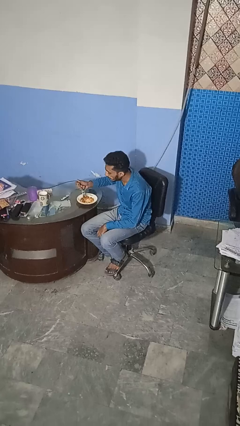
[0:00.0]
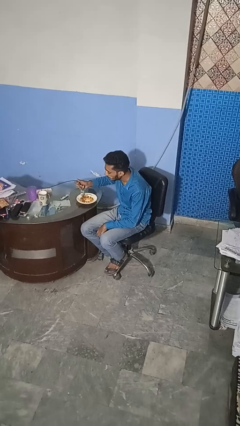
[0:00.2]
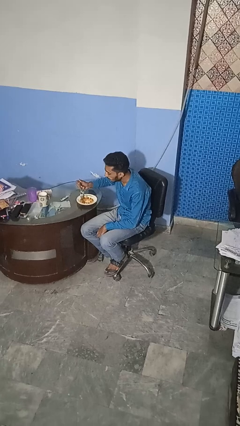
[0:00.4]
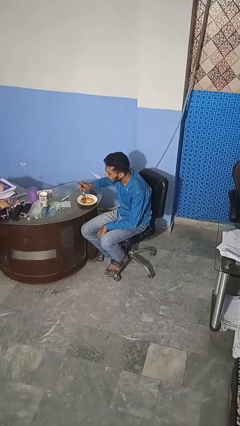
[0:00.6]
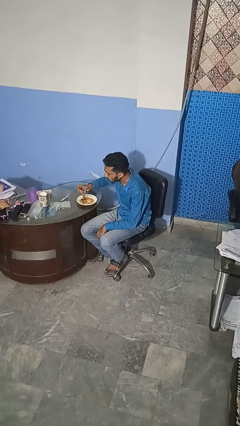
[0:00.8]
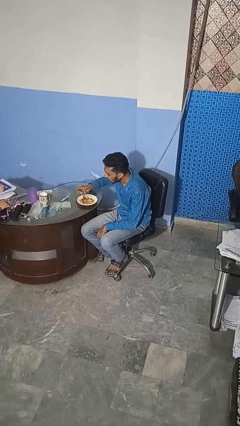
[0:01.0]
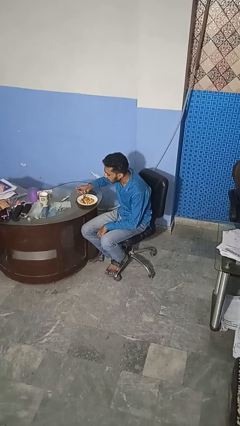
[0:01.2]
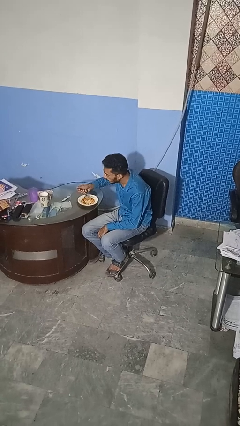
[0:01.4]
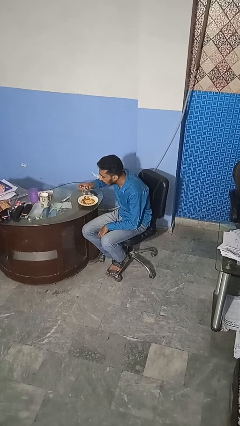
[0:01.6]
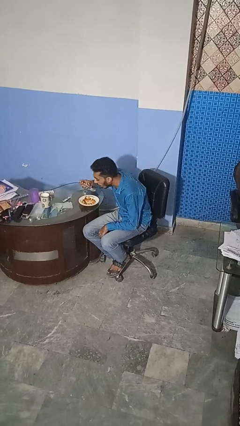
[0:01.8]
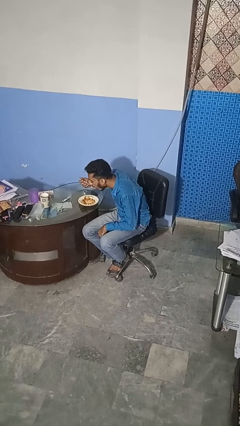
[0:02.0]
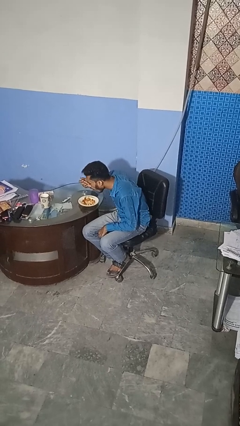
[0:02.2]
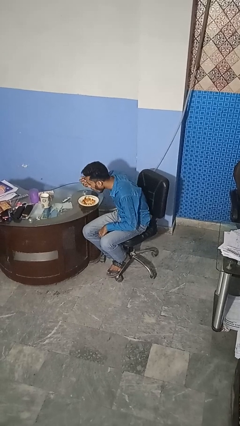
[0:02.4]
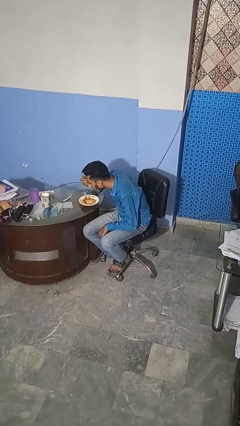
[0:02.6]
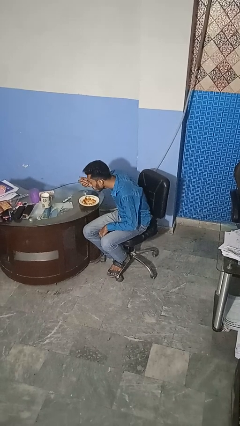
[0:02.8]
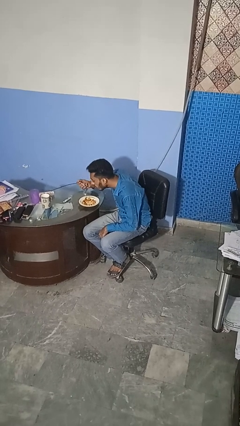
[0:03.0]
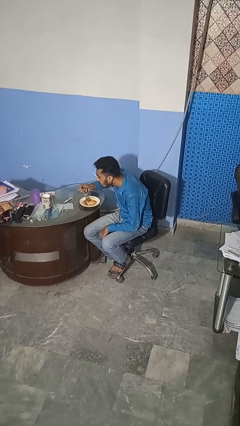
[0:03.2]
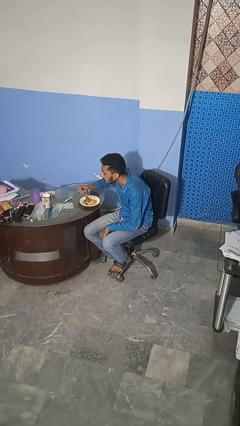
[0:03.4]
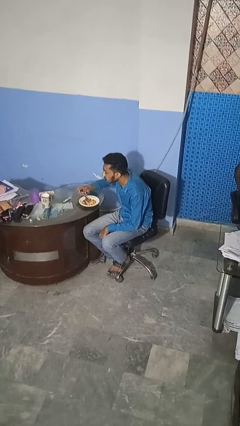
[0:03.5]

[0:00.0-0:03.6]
person eats with utensil

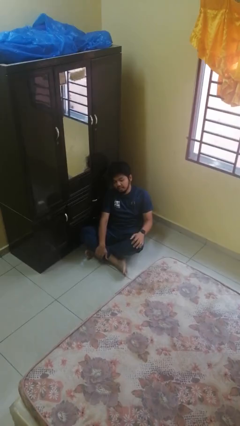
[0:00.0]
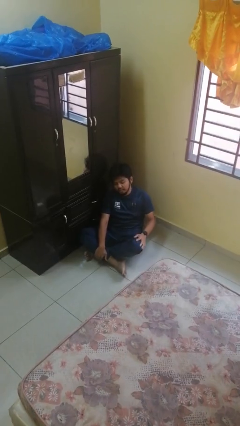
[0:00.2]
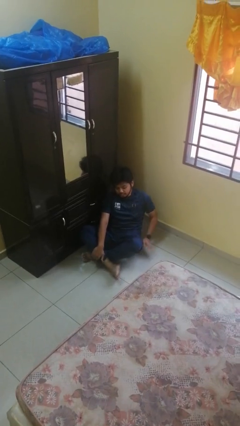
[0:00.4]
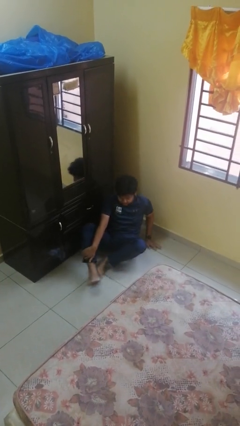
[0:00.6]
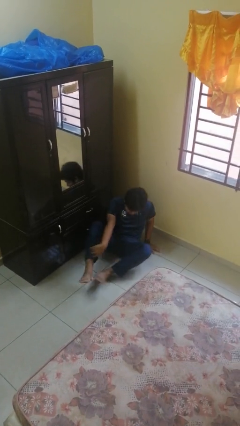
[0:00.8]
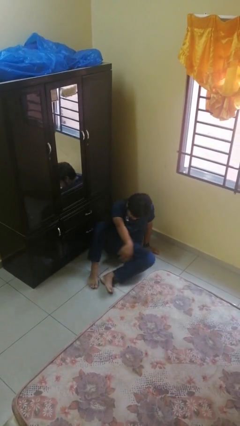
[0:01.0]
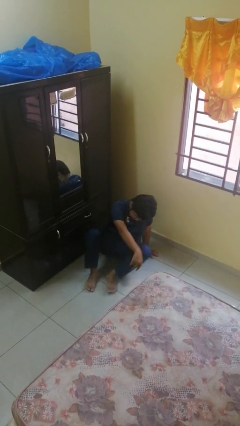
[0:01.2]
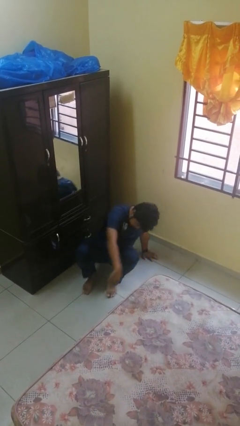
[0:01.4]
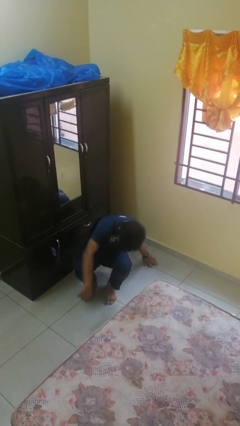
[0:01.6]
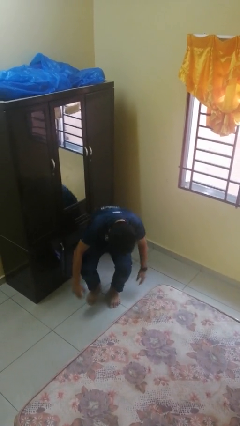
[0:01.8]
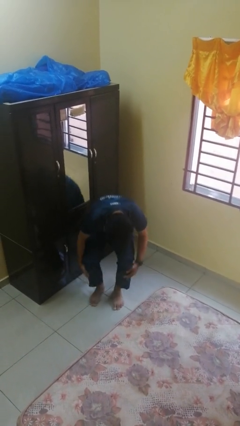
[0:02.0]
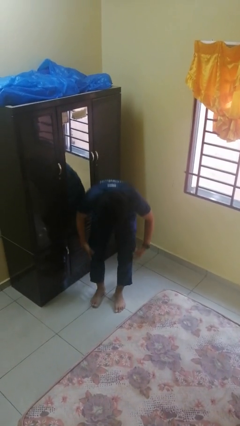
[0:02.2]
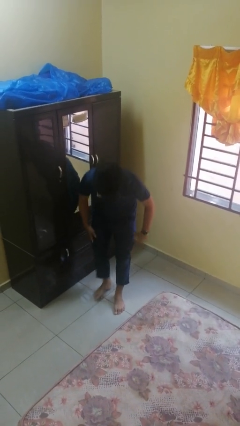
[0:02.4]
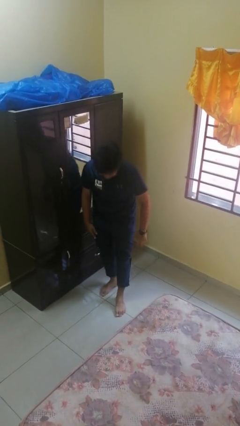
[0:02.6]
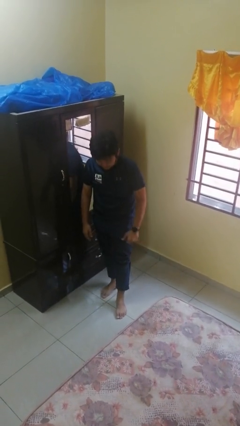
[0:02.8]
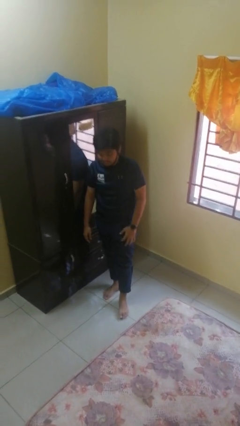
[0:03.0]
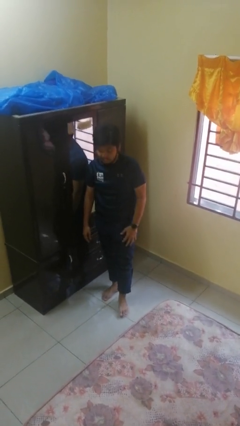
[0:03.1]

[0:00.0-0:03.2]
person stands up from floor

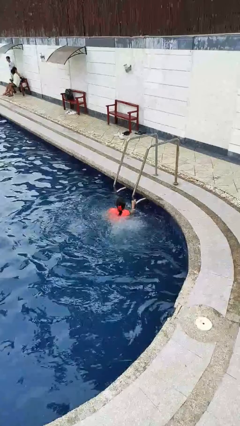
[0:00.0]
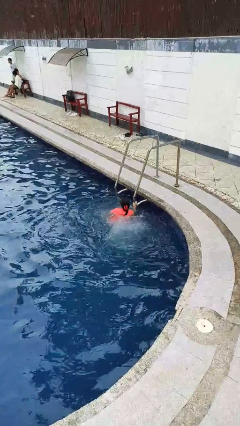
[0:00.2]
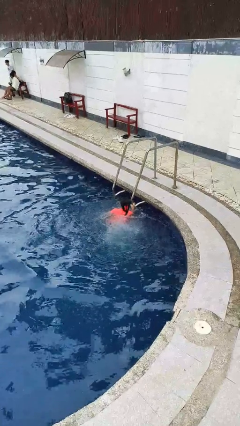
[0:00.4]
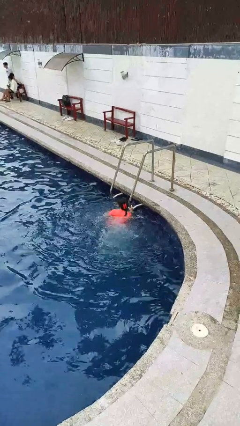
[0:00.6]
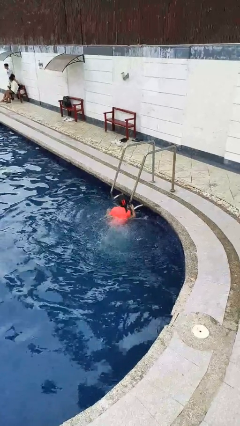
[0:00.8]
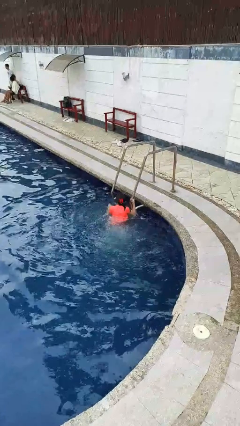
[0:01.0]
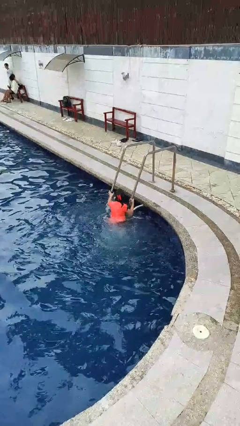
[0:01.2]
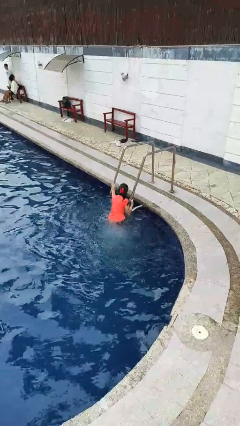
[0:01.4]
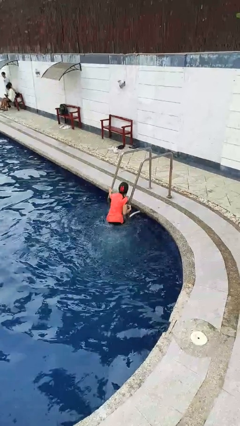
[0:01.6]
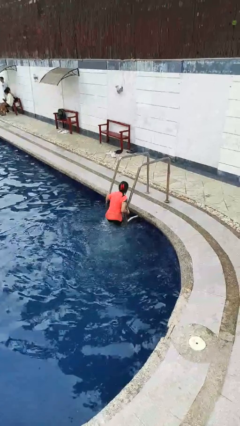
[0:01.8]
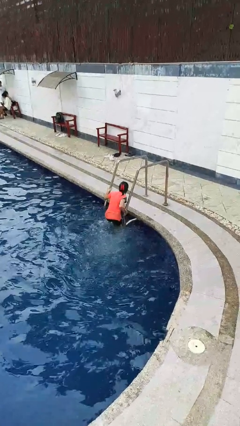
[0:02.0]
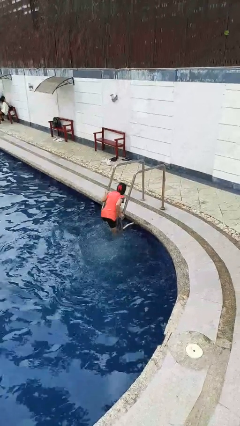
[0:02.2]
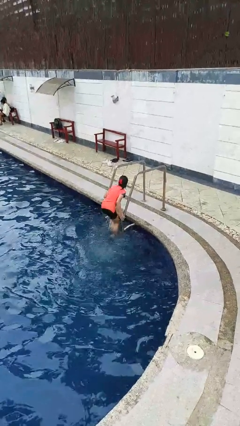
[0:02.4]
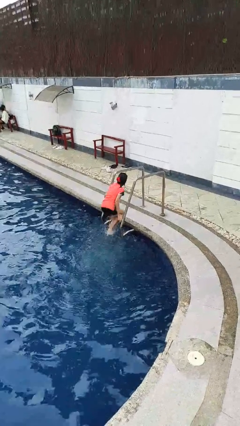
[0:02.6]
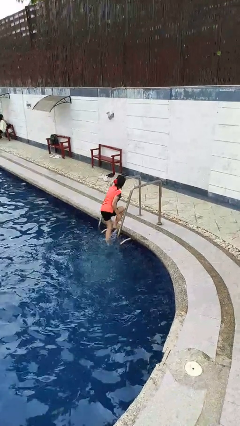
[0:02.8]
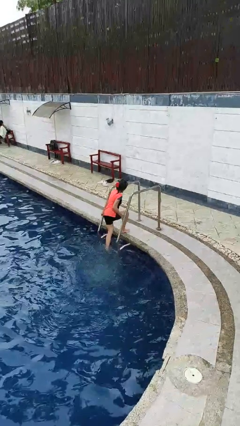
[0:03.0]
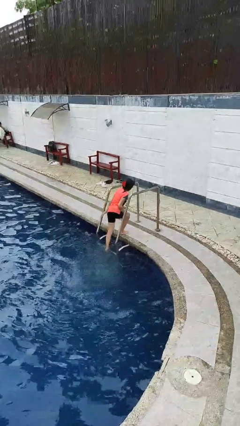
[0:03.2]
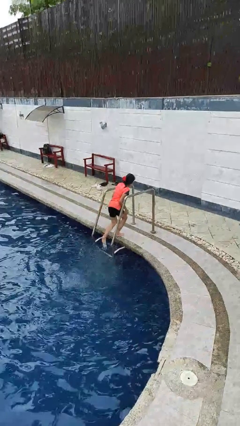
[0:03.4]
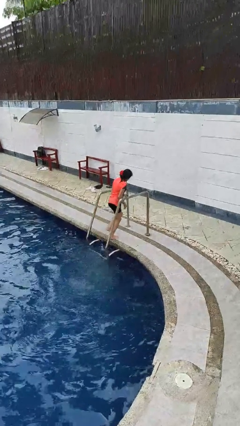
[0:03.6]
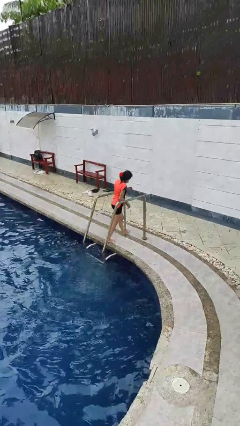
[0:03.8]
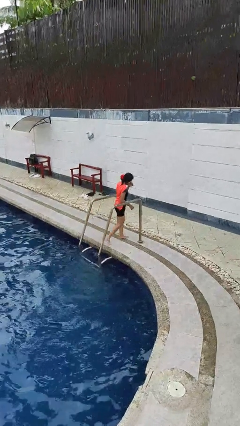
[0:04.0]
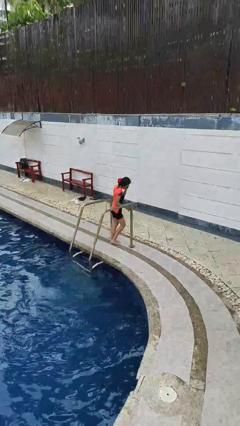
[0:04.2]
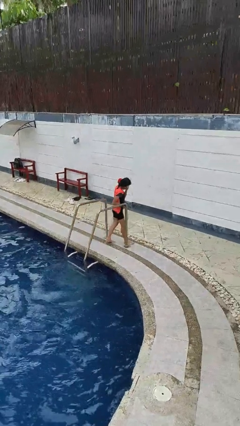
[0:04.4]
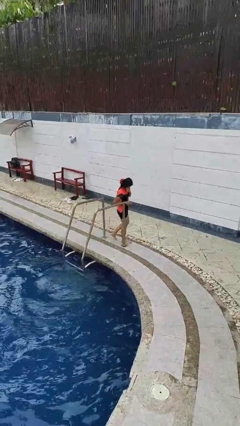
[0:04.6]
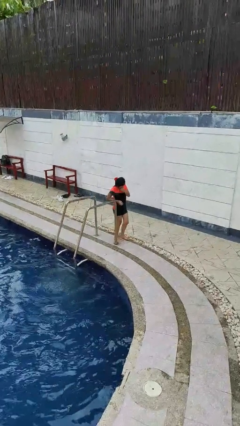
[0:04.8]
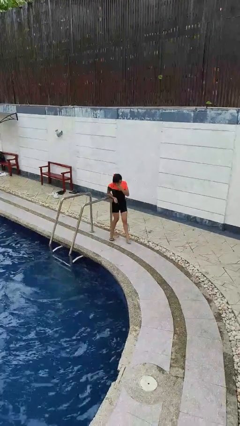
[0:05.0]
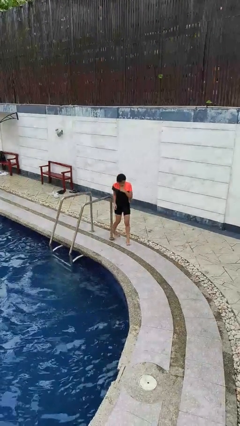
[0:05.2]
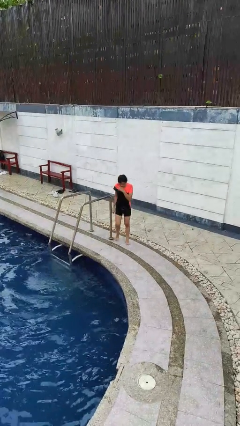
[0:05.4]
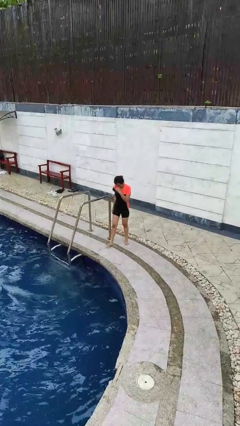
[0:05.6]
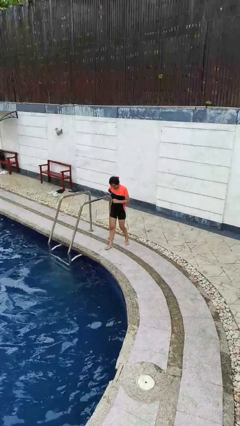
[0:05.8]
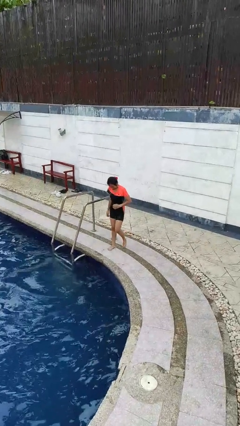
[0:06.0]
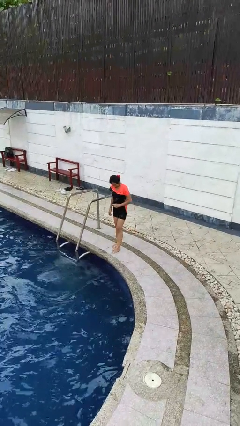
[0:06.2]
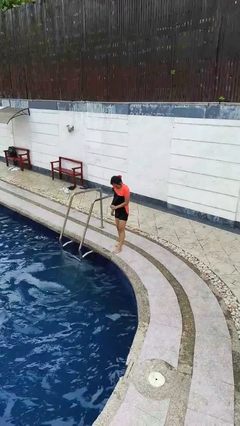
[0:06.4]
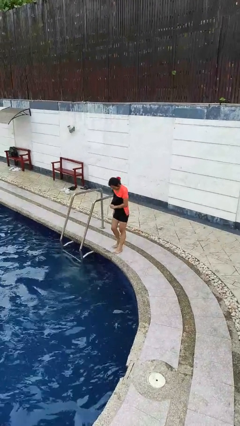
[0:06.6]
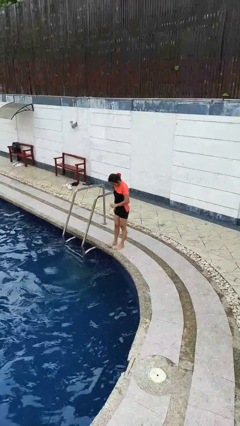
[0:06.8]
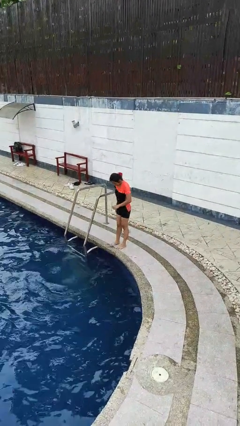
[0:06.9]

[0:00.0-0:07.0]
person exits pool

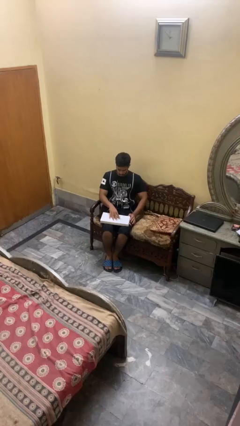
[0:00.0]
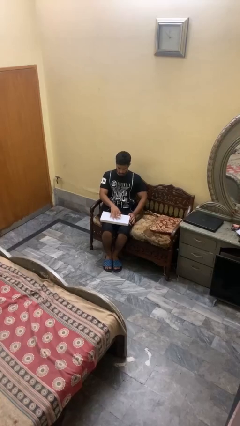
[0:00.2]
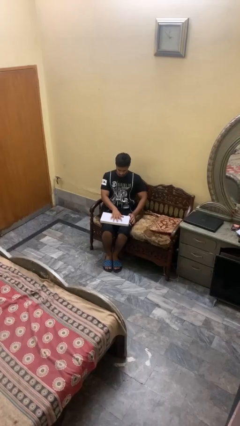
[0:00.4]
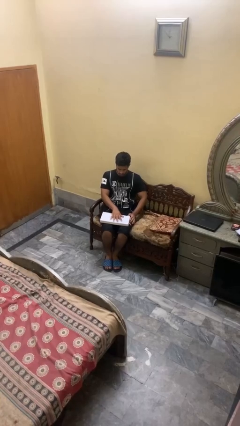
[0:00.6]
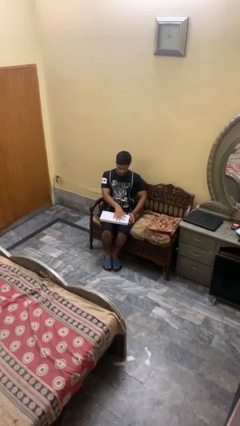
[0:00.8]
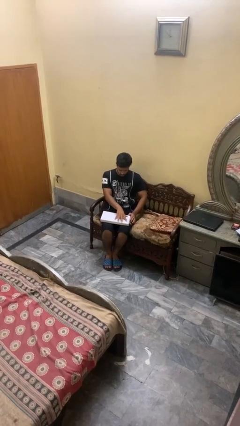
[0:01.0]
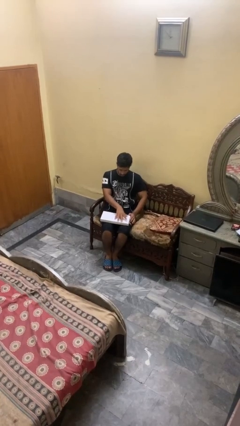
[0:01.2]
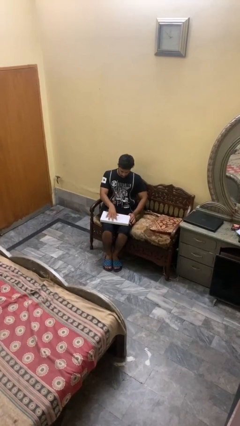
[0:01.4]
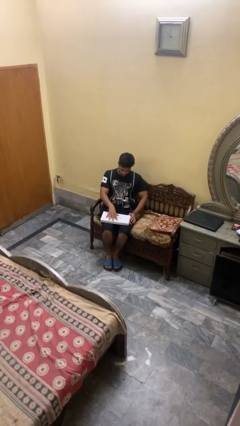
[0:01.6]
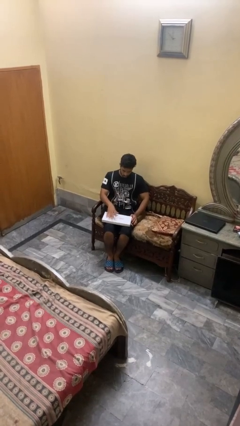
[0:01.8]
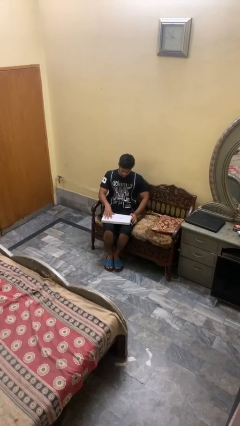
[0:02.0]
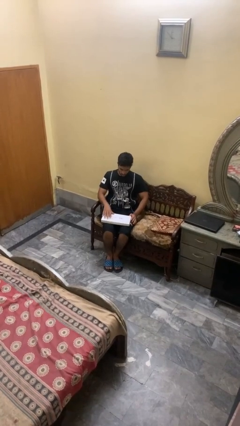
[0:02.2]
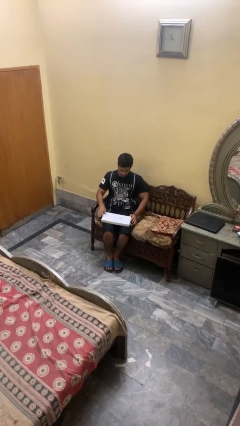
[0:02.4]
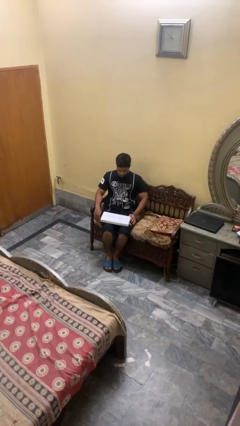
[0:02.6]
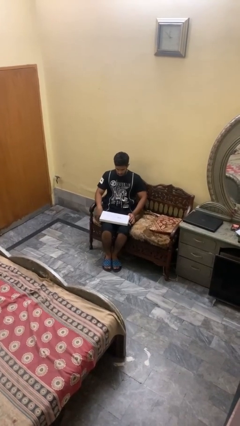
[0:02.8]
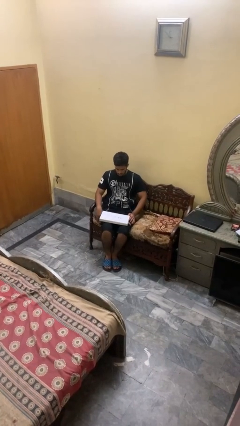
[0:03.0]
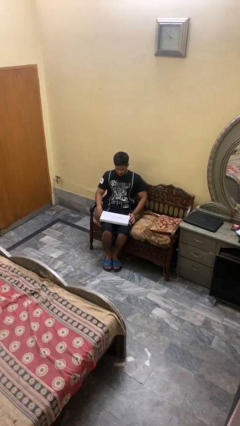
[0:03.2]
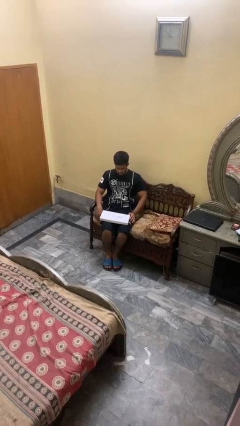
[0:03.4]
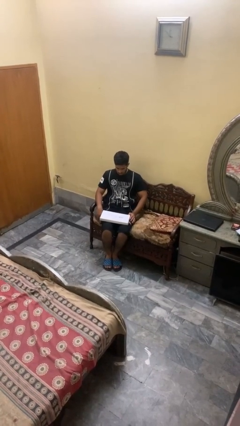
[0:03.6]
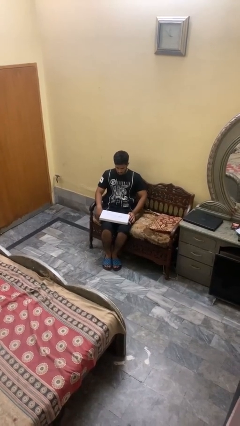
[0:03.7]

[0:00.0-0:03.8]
person taps object with finger
